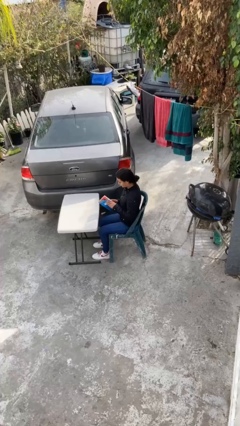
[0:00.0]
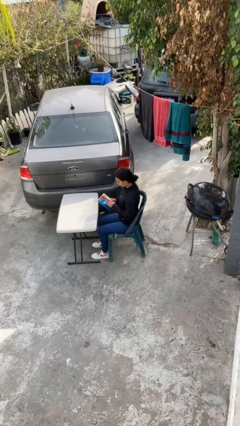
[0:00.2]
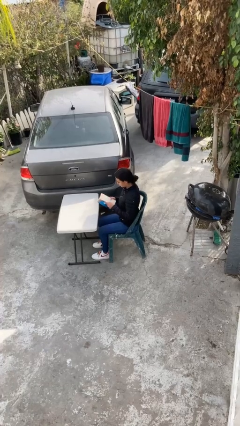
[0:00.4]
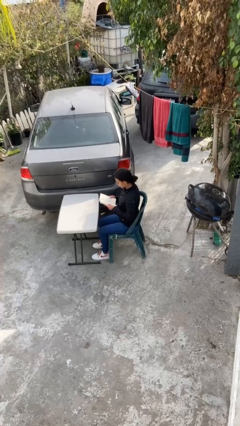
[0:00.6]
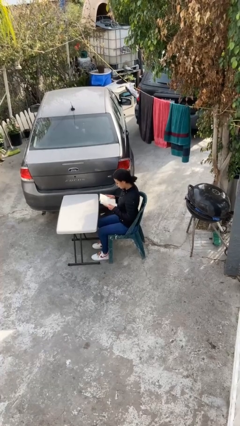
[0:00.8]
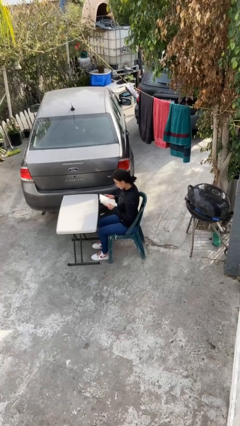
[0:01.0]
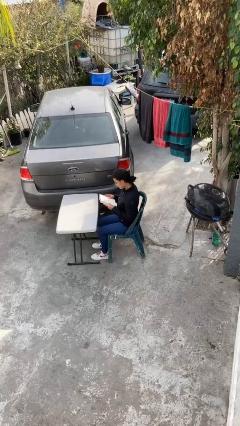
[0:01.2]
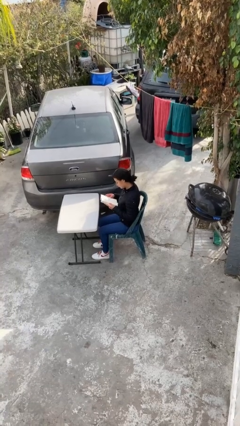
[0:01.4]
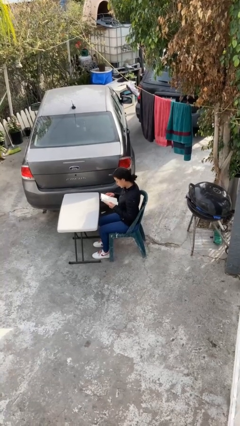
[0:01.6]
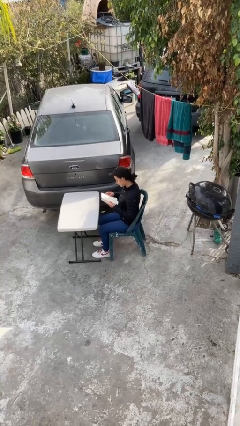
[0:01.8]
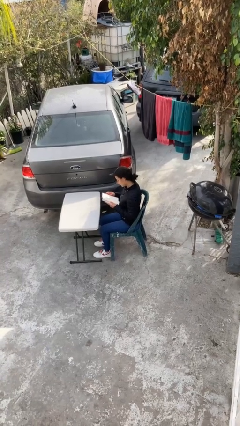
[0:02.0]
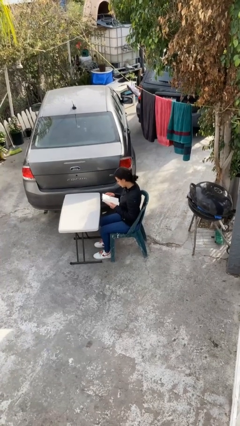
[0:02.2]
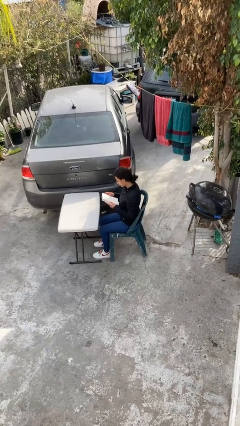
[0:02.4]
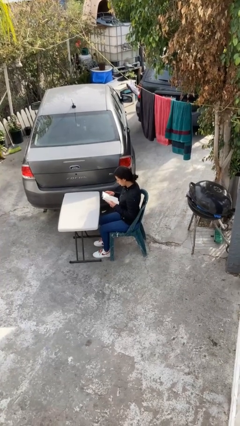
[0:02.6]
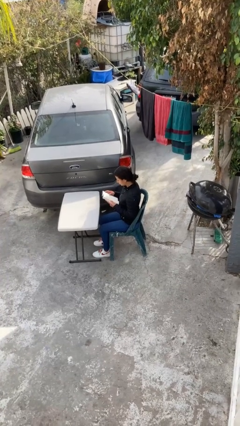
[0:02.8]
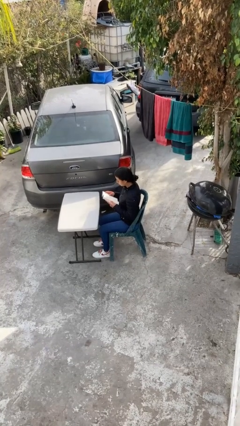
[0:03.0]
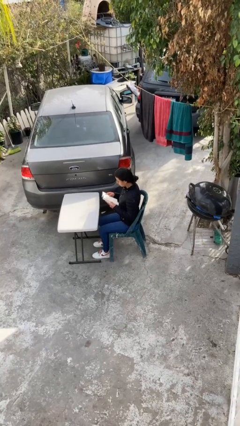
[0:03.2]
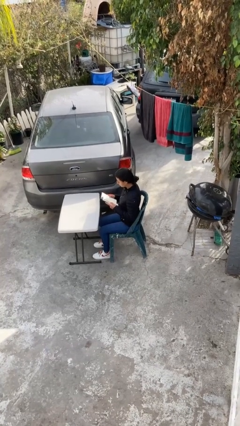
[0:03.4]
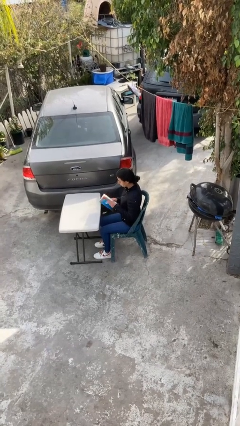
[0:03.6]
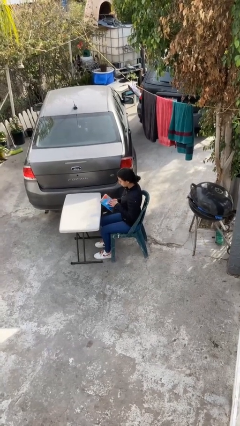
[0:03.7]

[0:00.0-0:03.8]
person reads document

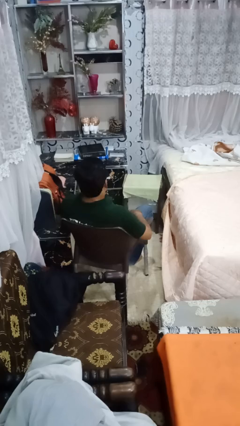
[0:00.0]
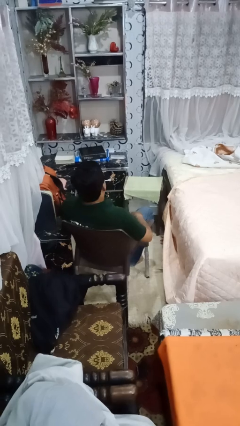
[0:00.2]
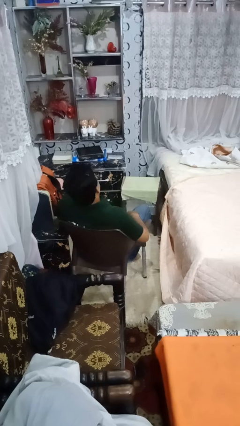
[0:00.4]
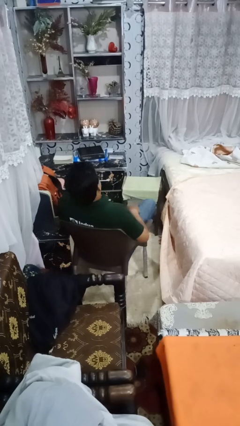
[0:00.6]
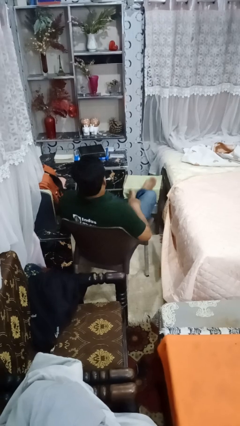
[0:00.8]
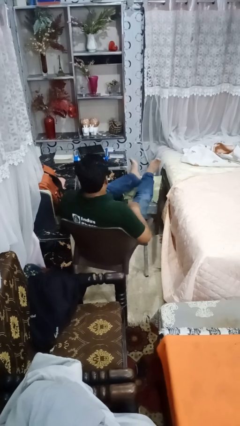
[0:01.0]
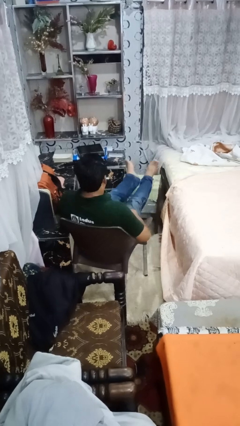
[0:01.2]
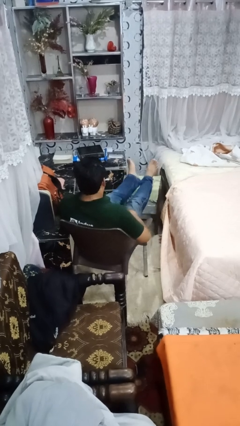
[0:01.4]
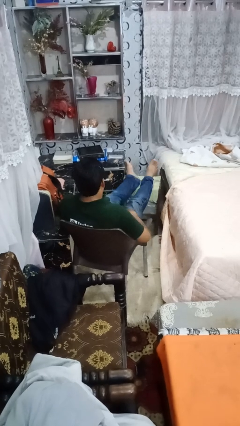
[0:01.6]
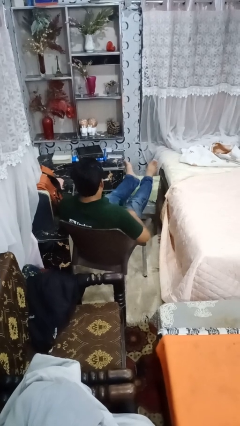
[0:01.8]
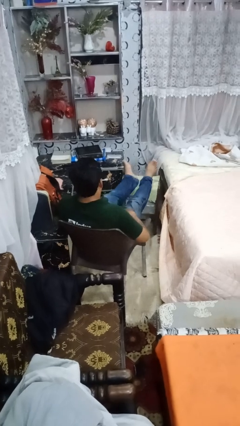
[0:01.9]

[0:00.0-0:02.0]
person puts feet up

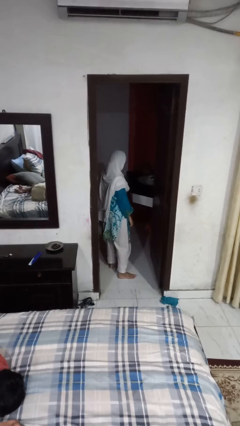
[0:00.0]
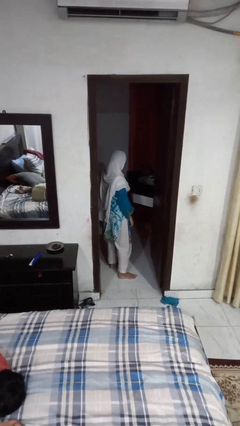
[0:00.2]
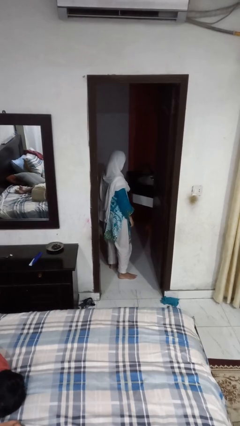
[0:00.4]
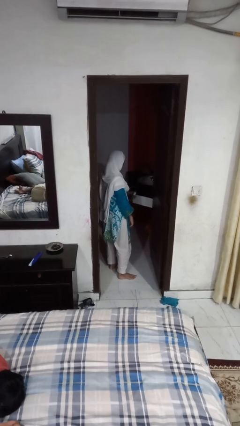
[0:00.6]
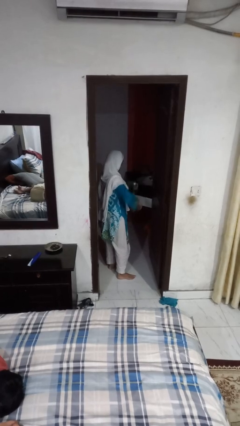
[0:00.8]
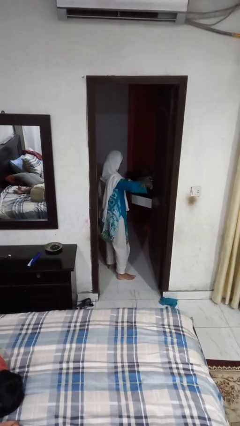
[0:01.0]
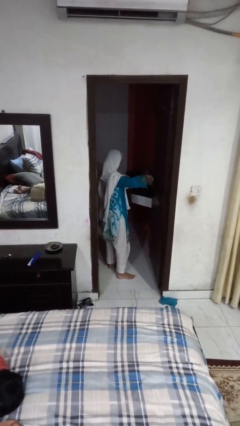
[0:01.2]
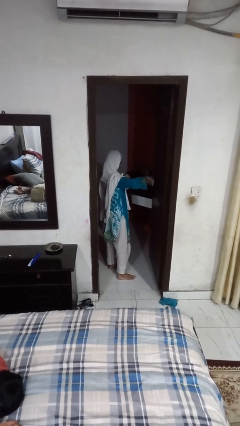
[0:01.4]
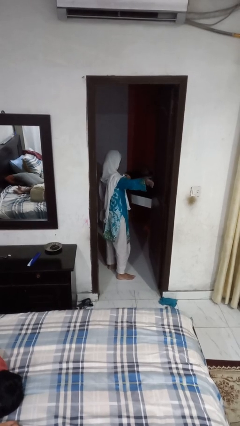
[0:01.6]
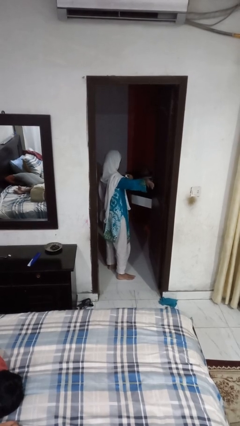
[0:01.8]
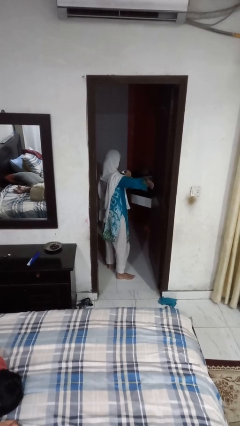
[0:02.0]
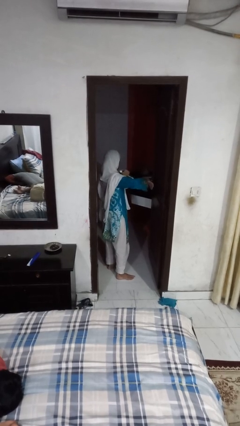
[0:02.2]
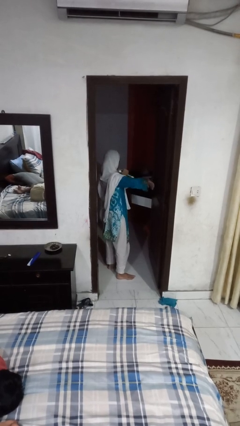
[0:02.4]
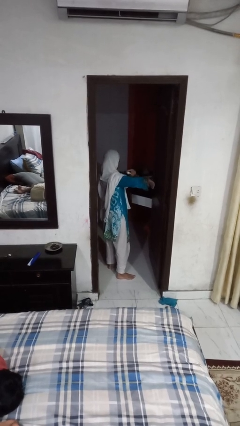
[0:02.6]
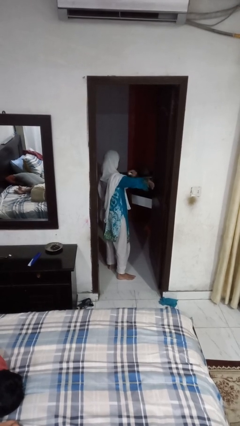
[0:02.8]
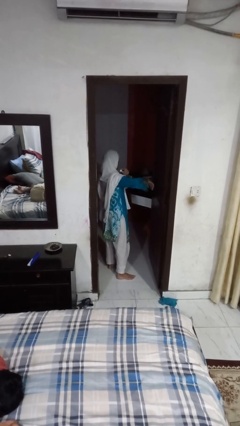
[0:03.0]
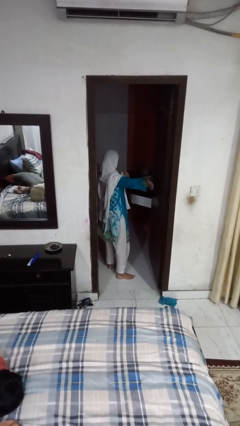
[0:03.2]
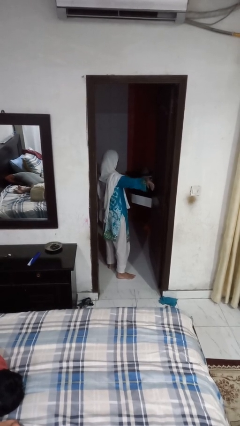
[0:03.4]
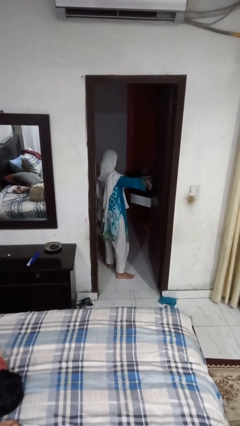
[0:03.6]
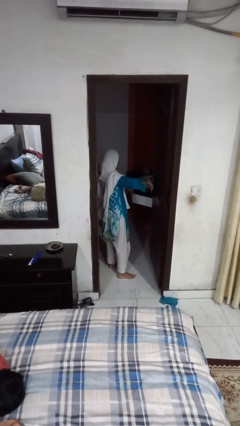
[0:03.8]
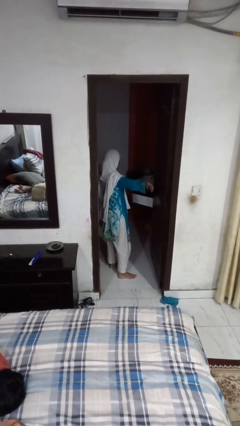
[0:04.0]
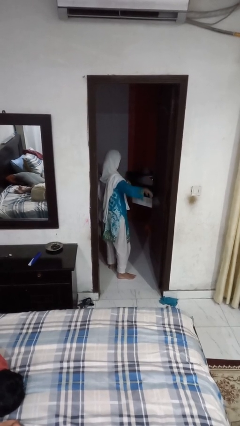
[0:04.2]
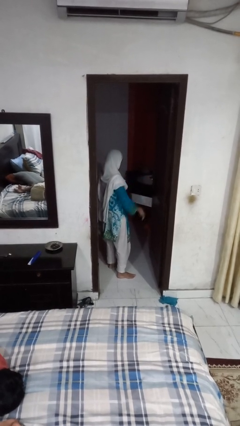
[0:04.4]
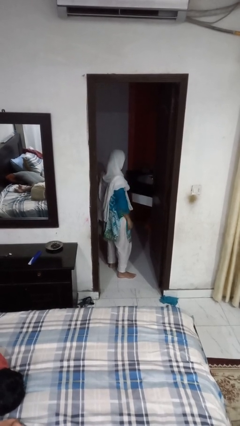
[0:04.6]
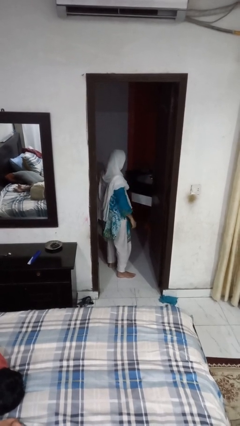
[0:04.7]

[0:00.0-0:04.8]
person applies deodorant

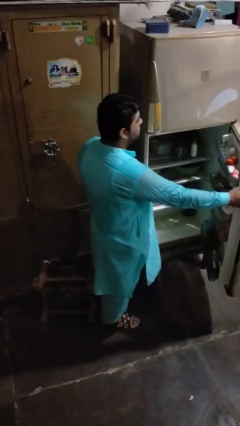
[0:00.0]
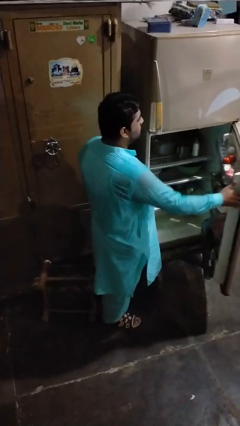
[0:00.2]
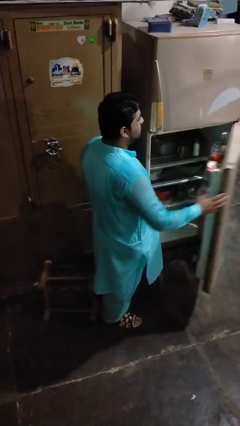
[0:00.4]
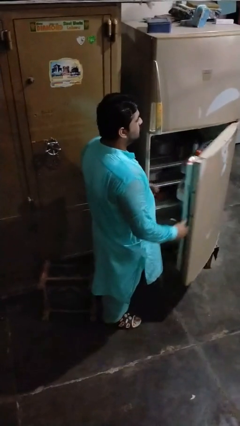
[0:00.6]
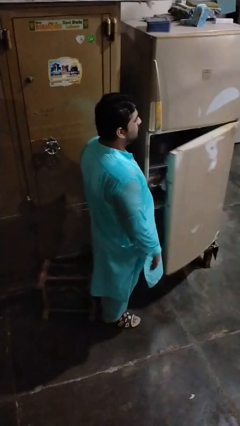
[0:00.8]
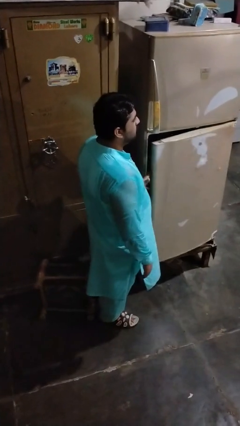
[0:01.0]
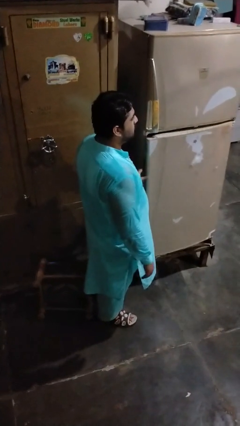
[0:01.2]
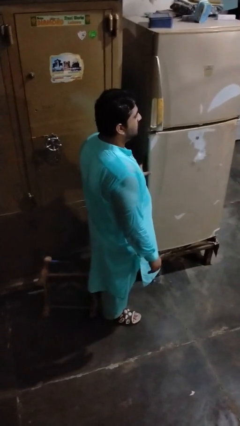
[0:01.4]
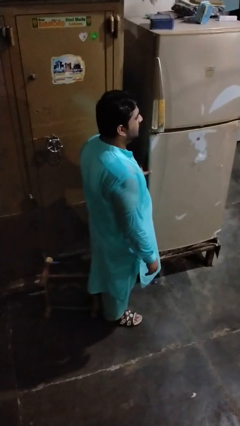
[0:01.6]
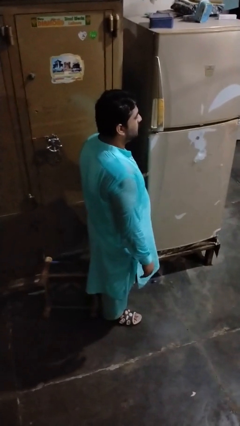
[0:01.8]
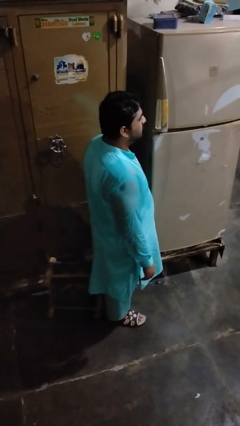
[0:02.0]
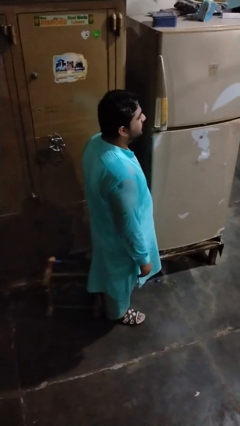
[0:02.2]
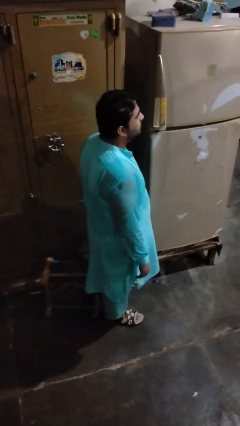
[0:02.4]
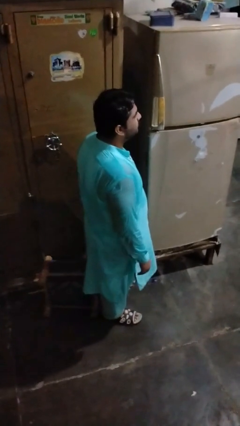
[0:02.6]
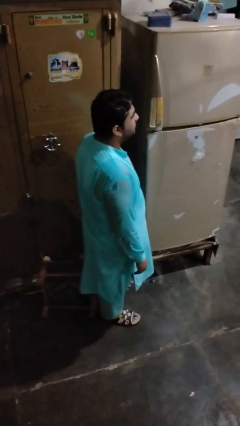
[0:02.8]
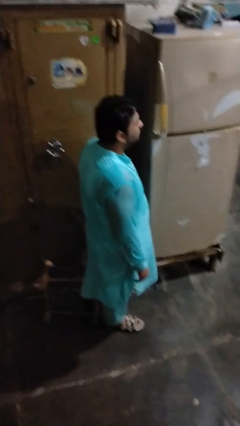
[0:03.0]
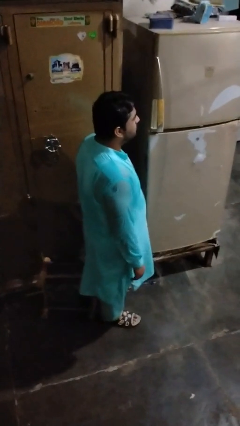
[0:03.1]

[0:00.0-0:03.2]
person closes refrigerator

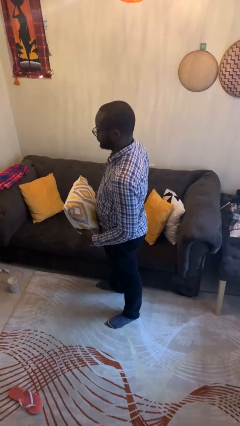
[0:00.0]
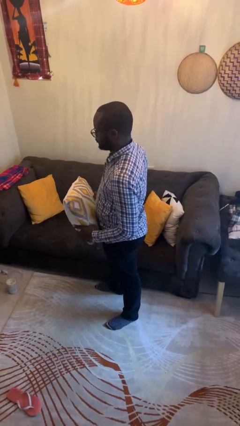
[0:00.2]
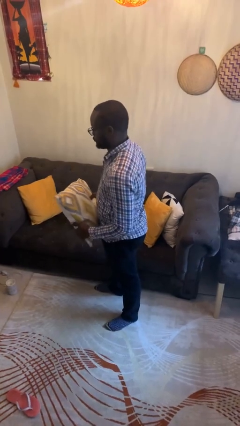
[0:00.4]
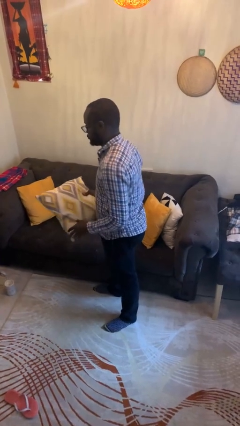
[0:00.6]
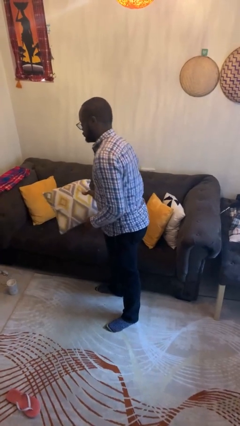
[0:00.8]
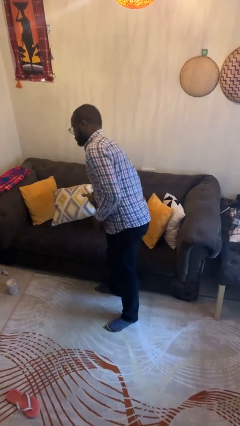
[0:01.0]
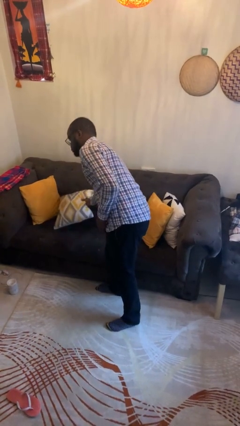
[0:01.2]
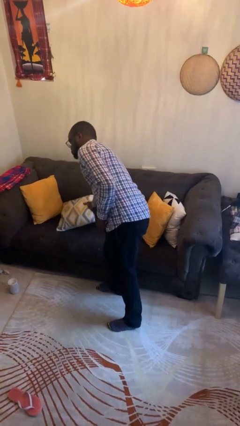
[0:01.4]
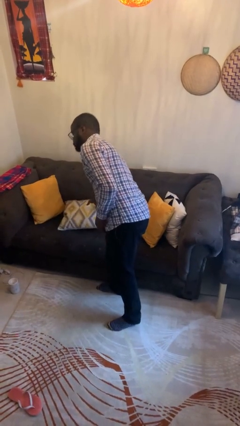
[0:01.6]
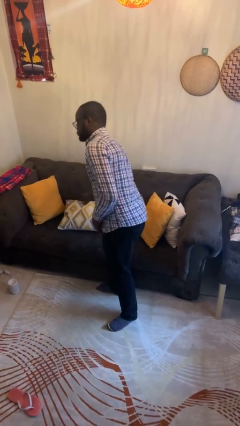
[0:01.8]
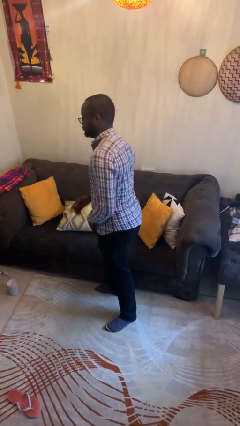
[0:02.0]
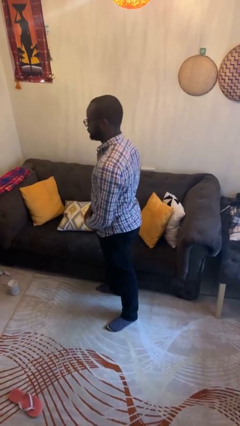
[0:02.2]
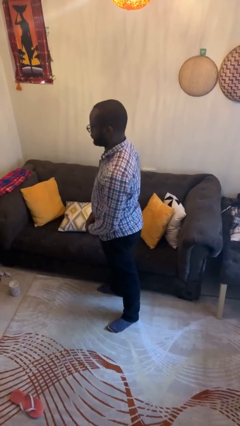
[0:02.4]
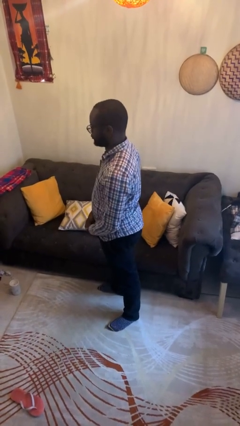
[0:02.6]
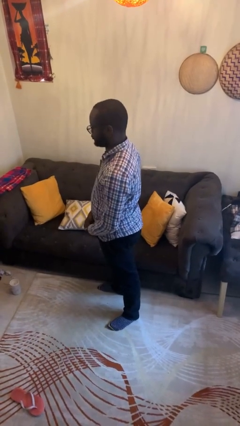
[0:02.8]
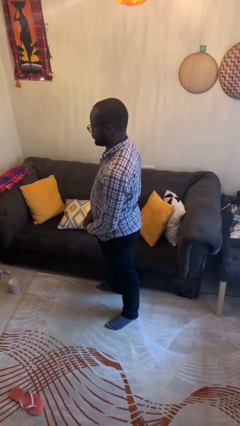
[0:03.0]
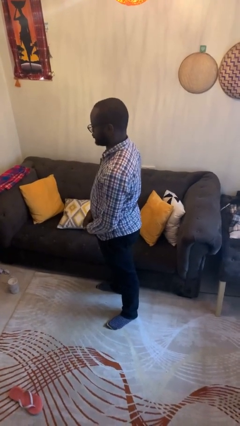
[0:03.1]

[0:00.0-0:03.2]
person puts down object on couch

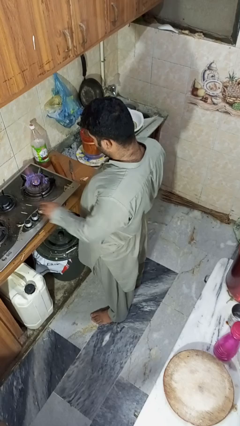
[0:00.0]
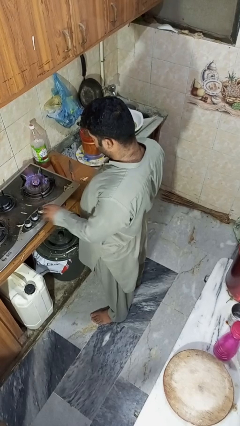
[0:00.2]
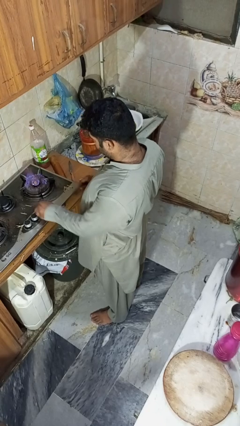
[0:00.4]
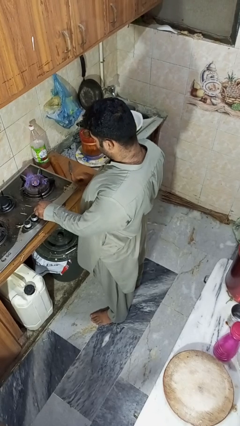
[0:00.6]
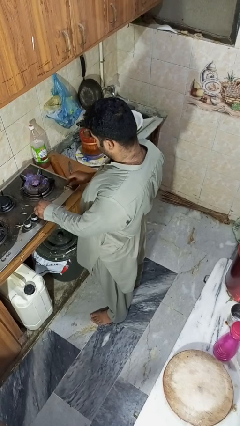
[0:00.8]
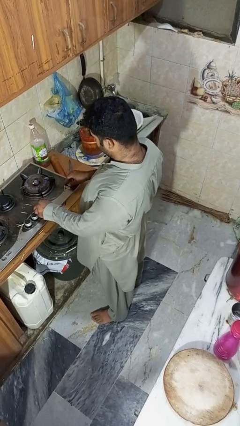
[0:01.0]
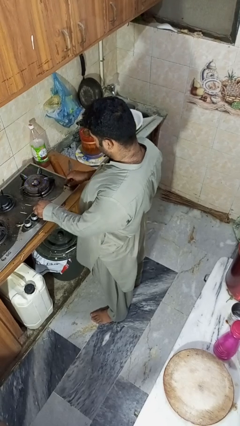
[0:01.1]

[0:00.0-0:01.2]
person turns off stovetop
